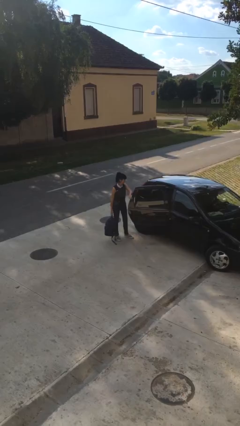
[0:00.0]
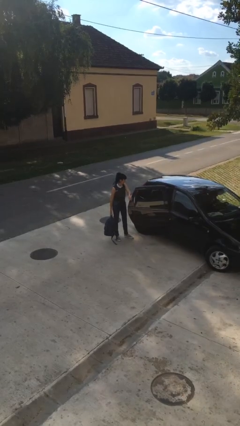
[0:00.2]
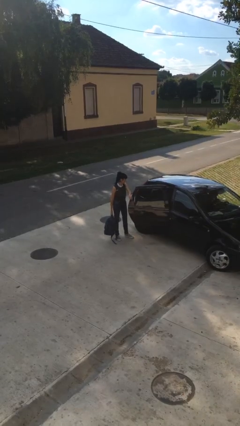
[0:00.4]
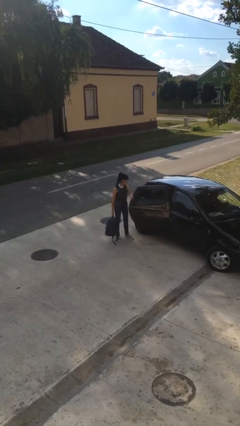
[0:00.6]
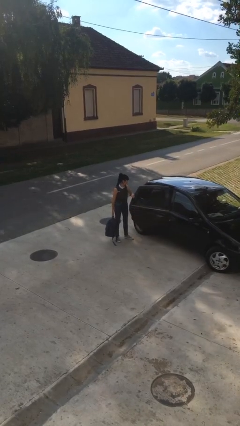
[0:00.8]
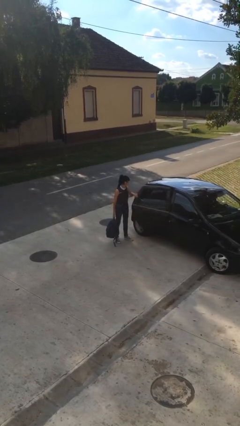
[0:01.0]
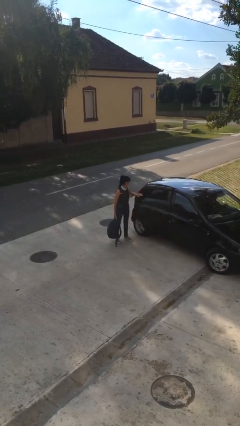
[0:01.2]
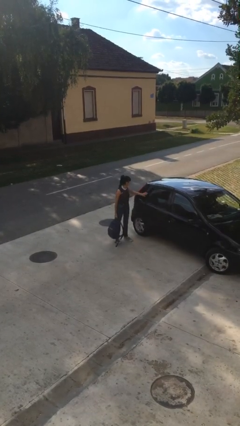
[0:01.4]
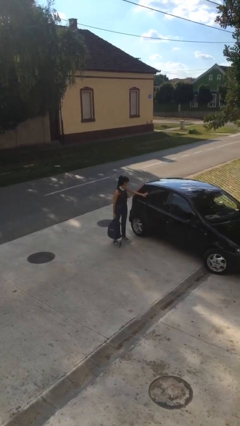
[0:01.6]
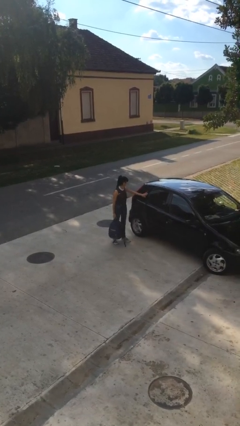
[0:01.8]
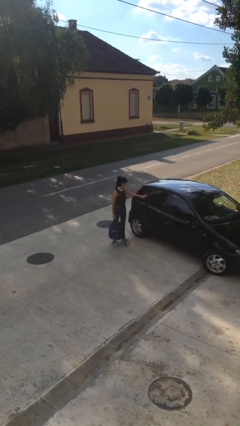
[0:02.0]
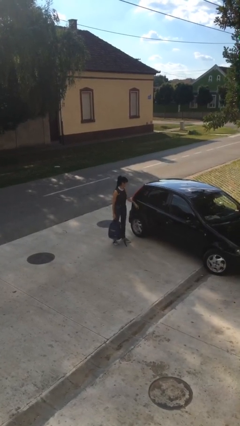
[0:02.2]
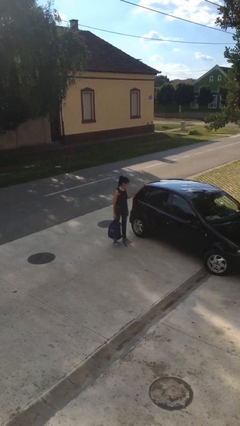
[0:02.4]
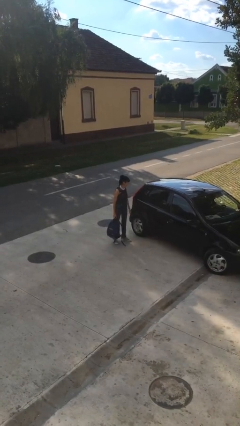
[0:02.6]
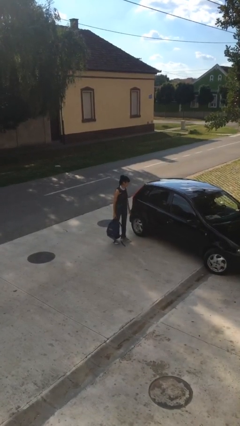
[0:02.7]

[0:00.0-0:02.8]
person closes car door

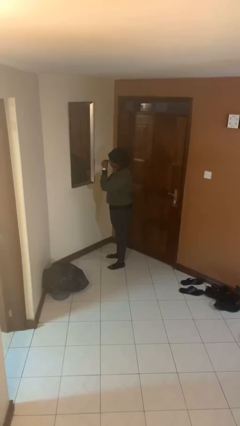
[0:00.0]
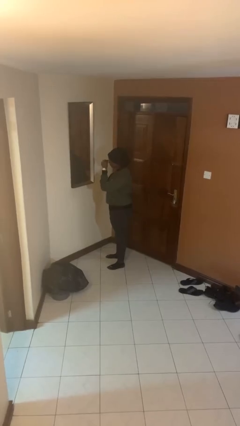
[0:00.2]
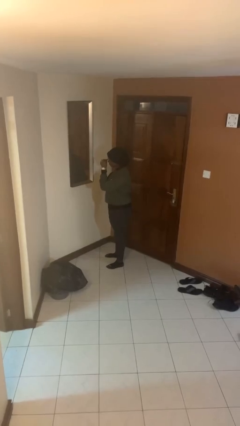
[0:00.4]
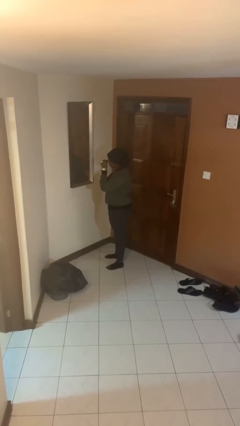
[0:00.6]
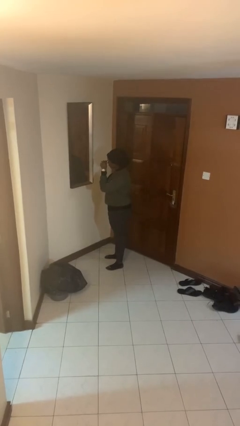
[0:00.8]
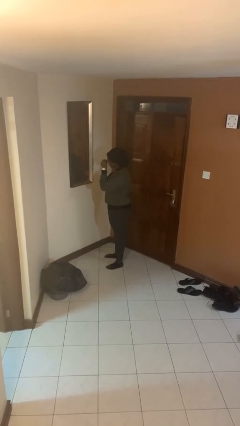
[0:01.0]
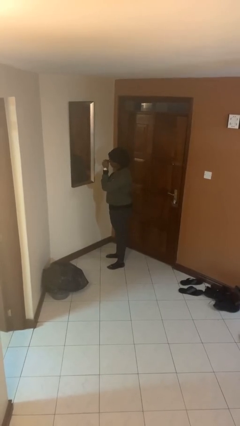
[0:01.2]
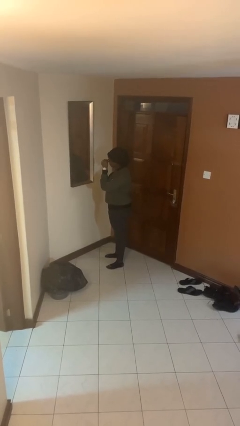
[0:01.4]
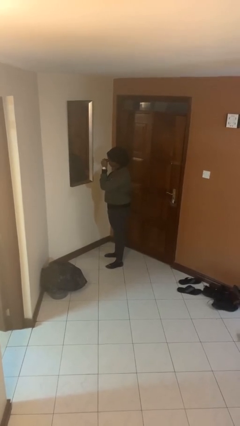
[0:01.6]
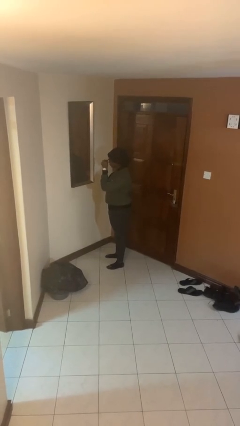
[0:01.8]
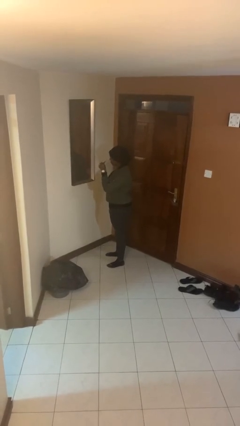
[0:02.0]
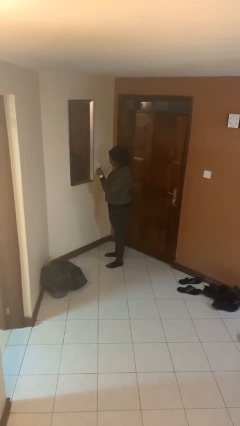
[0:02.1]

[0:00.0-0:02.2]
person applies eye makeup

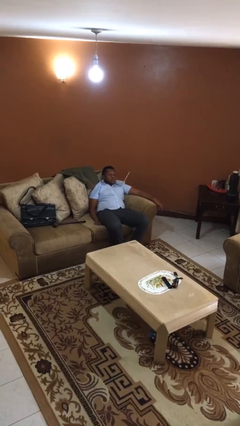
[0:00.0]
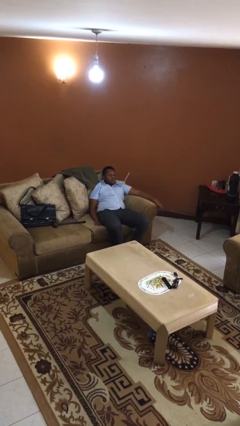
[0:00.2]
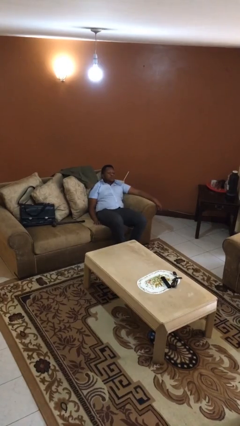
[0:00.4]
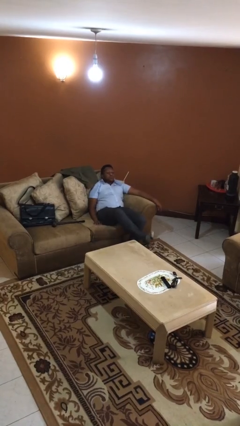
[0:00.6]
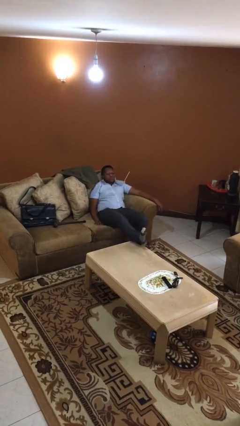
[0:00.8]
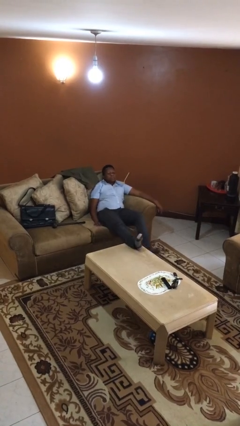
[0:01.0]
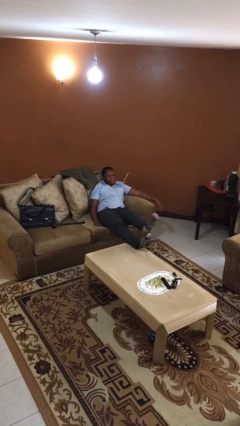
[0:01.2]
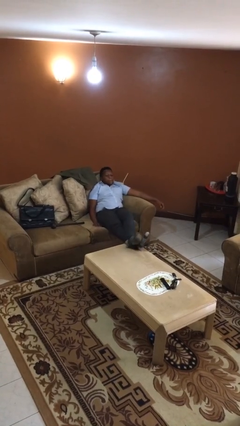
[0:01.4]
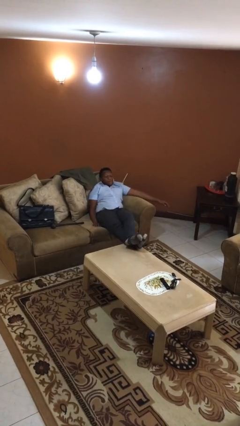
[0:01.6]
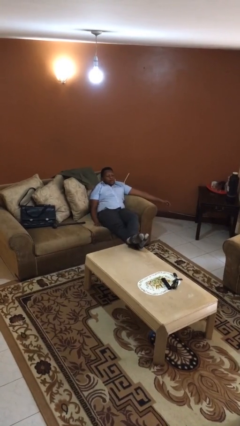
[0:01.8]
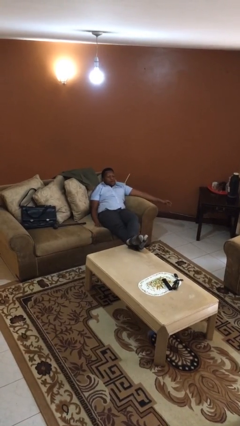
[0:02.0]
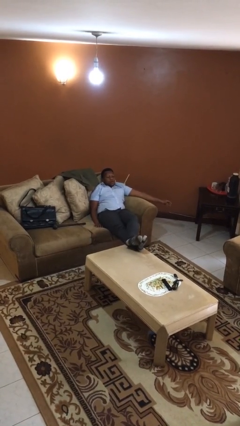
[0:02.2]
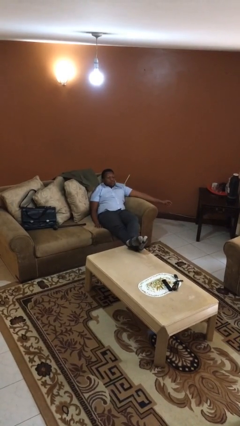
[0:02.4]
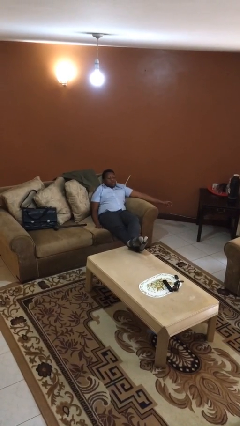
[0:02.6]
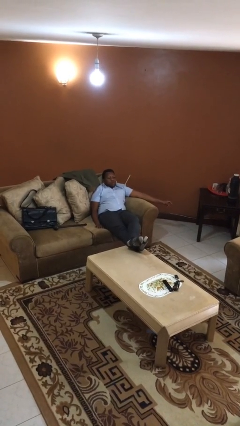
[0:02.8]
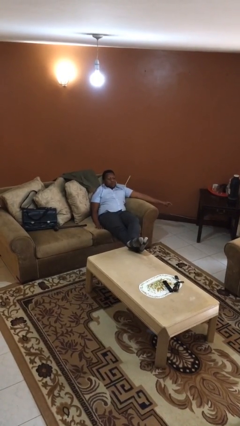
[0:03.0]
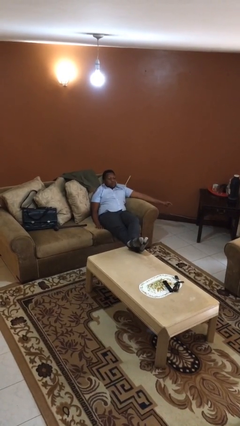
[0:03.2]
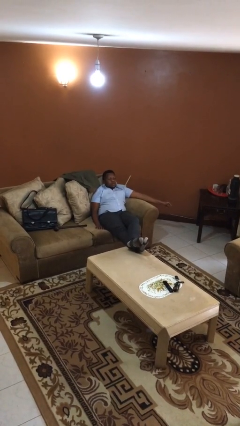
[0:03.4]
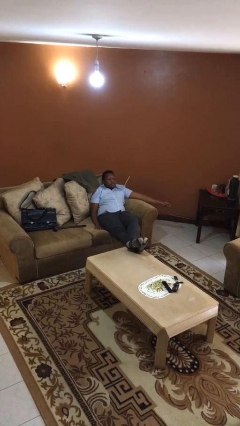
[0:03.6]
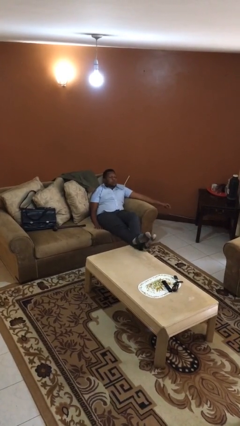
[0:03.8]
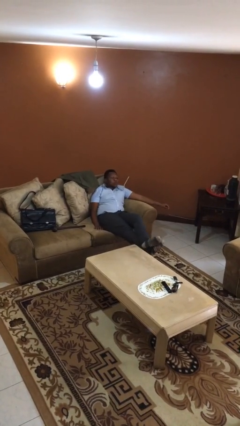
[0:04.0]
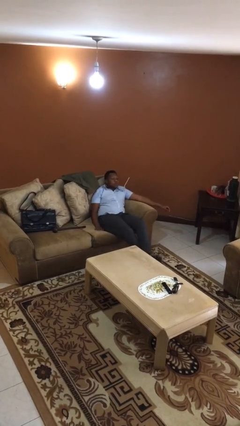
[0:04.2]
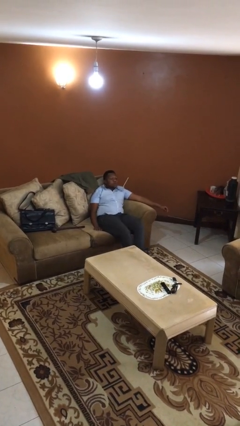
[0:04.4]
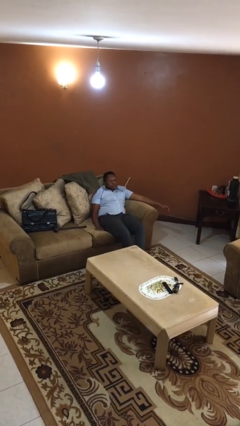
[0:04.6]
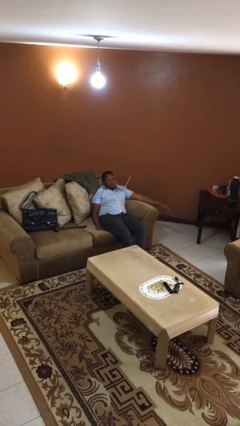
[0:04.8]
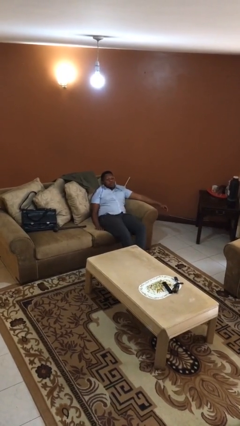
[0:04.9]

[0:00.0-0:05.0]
person puts feet up

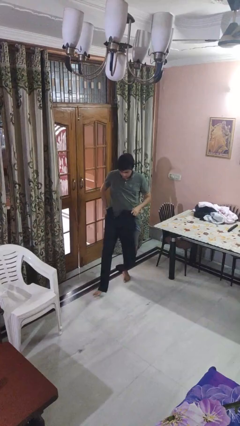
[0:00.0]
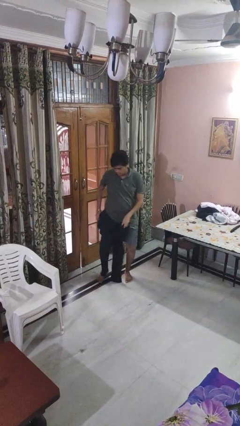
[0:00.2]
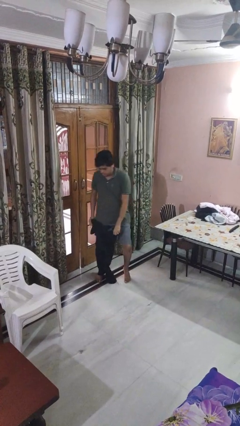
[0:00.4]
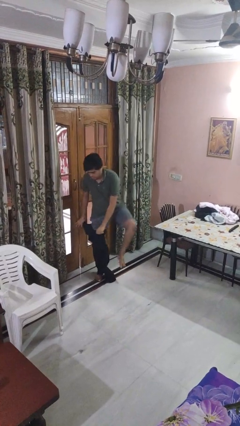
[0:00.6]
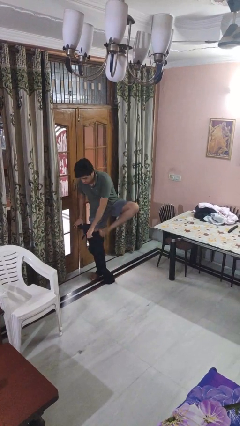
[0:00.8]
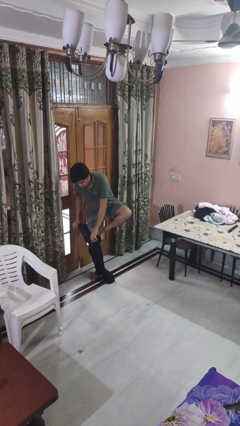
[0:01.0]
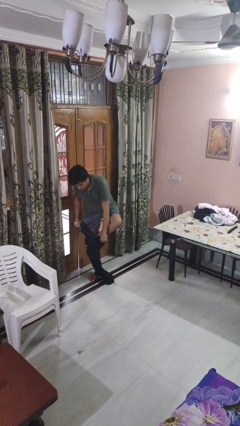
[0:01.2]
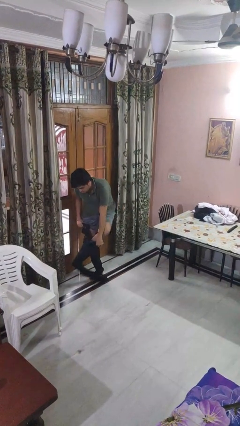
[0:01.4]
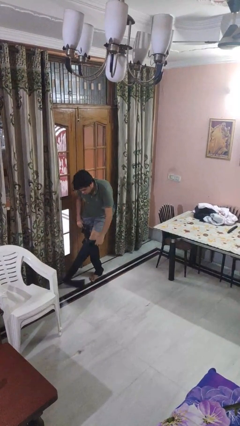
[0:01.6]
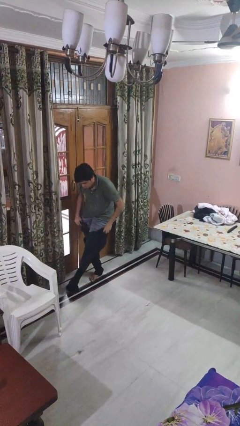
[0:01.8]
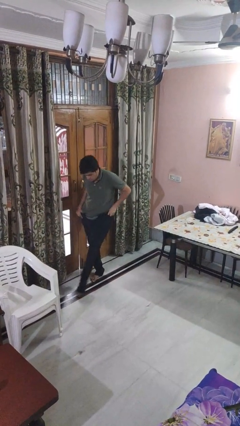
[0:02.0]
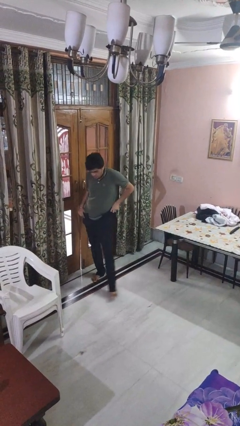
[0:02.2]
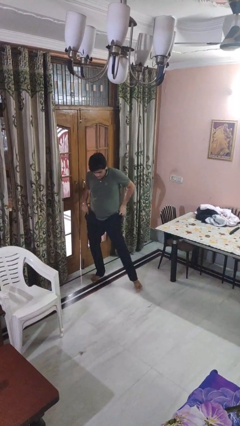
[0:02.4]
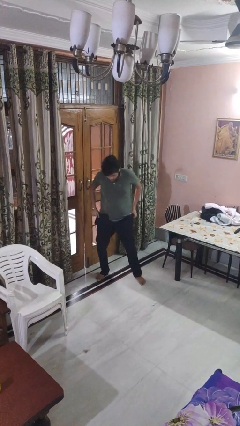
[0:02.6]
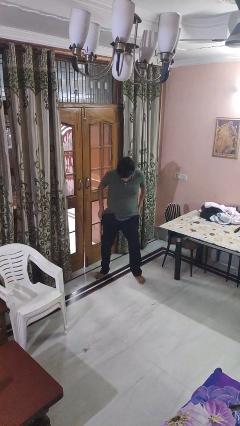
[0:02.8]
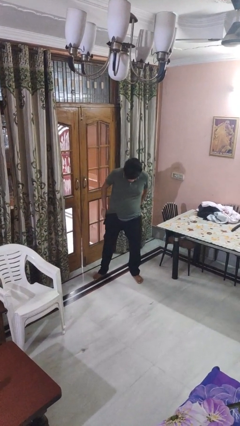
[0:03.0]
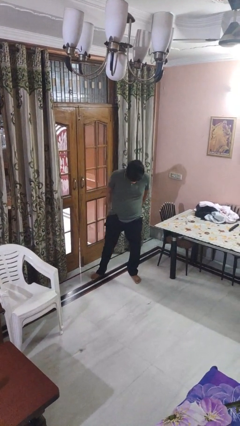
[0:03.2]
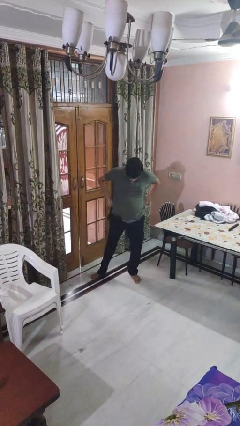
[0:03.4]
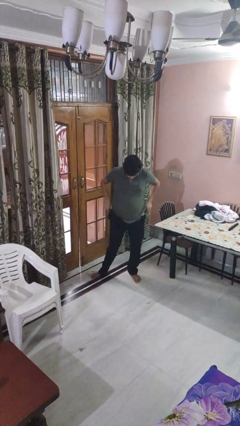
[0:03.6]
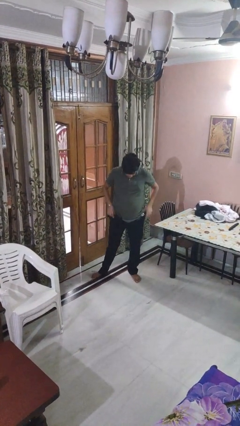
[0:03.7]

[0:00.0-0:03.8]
person puts on pants

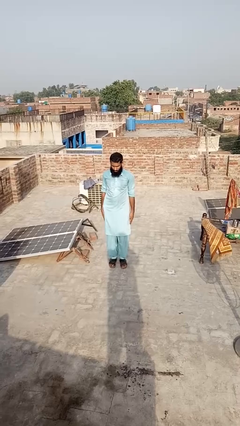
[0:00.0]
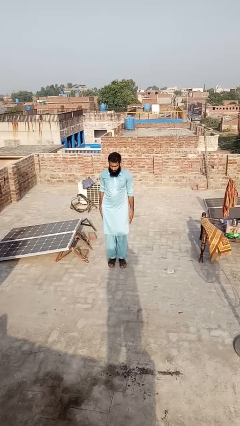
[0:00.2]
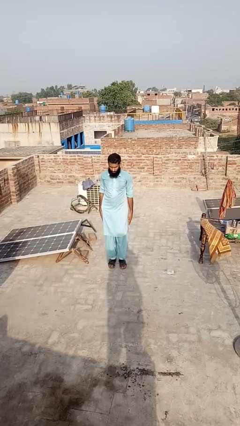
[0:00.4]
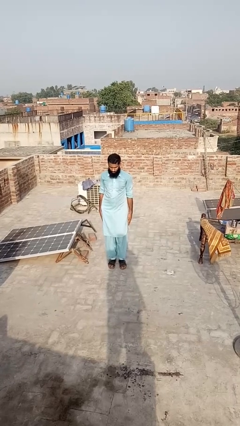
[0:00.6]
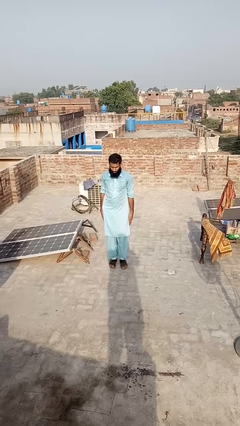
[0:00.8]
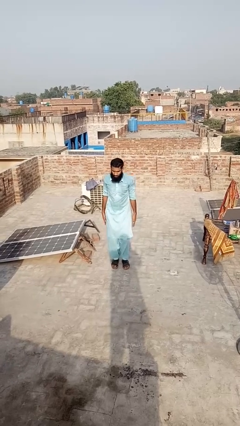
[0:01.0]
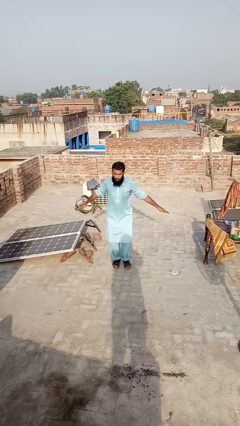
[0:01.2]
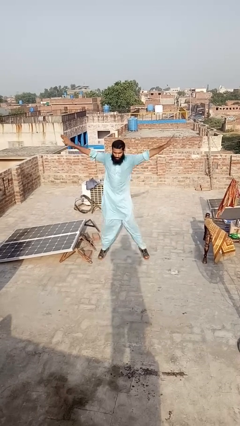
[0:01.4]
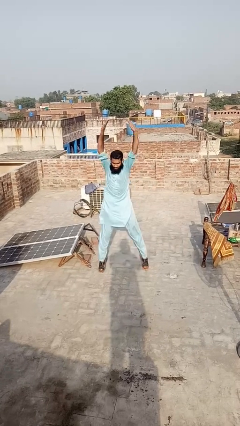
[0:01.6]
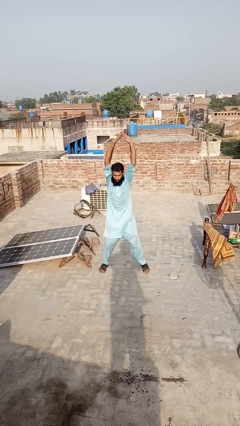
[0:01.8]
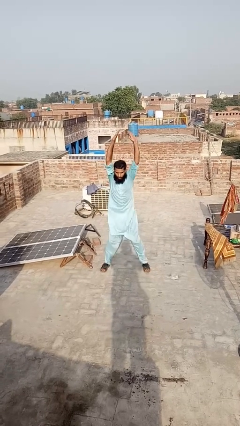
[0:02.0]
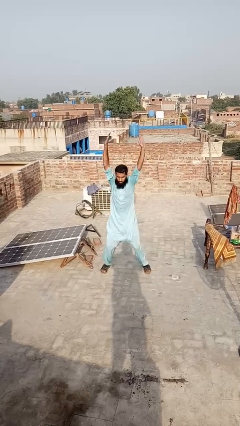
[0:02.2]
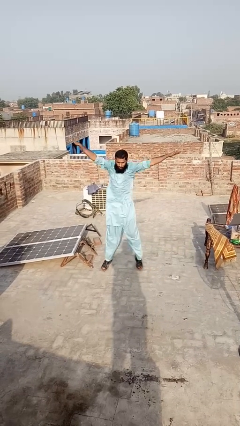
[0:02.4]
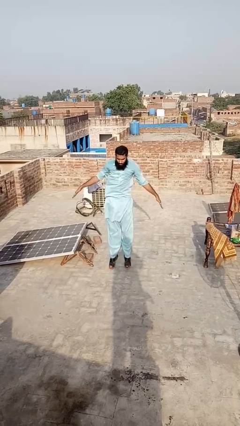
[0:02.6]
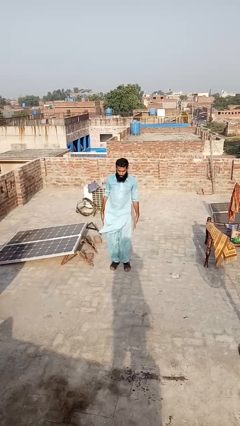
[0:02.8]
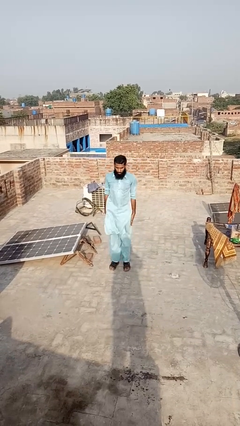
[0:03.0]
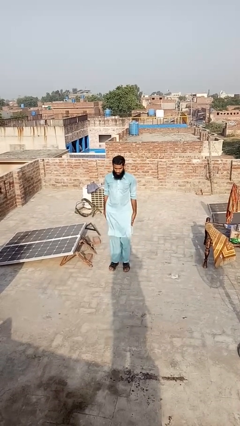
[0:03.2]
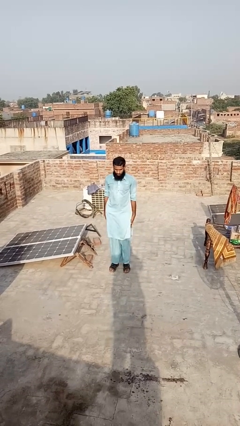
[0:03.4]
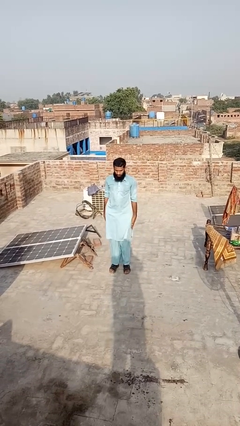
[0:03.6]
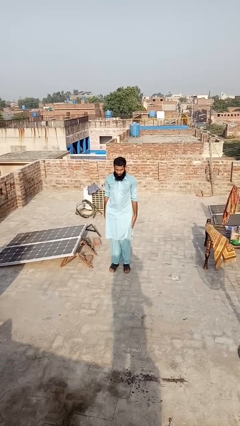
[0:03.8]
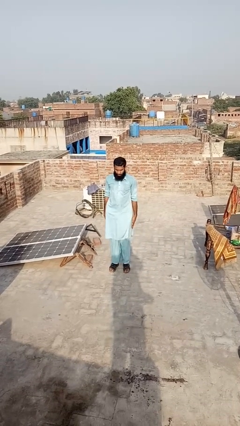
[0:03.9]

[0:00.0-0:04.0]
person exercises with jumping jacks
